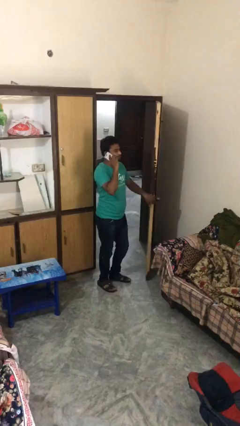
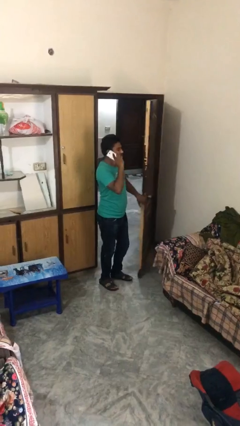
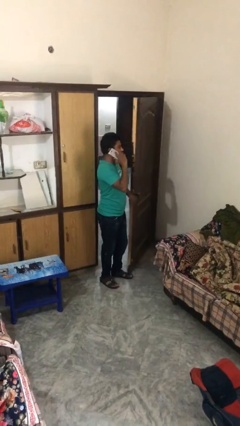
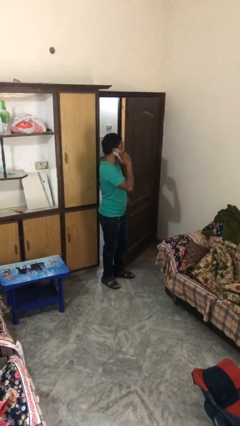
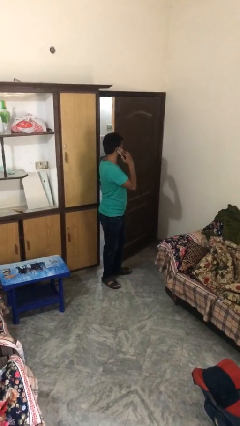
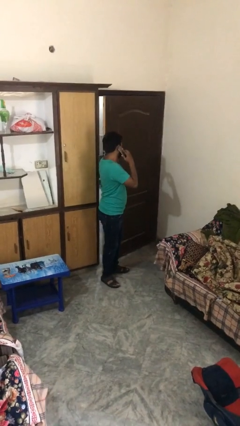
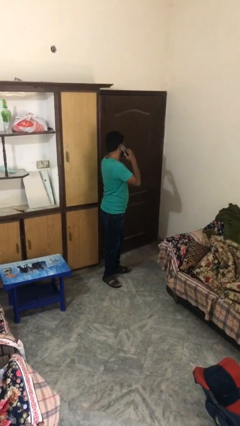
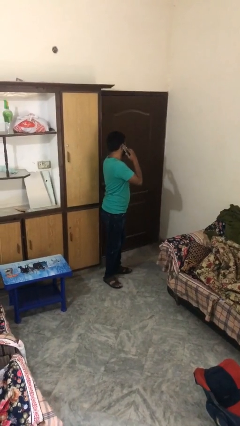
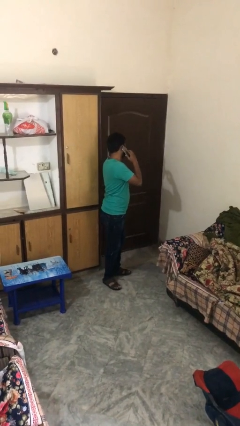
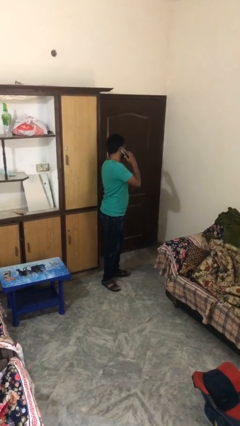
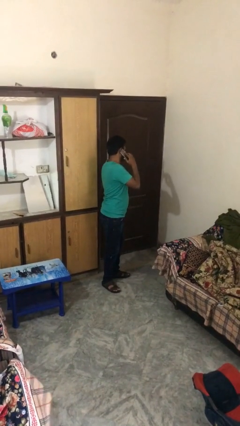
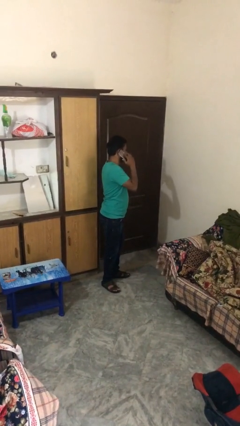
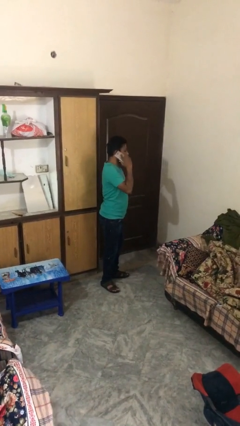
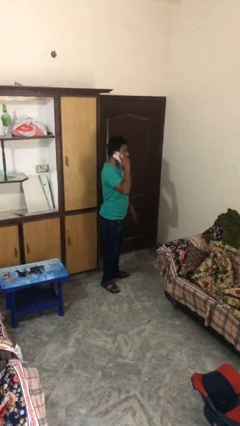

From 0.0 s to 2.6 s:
person closes facility door

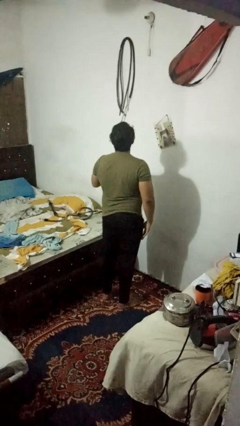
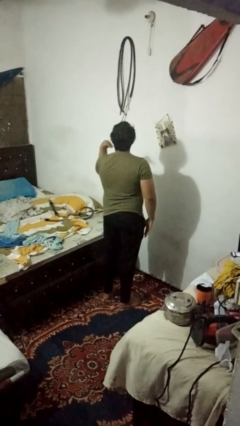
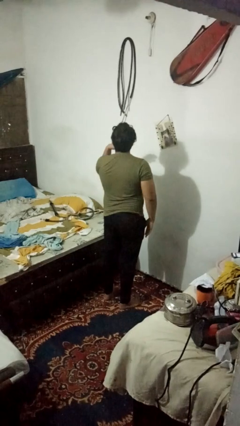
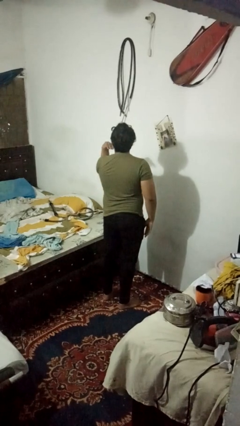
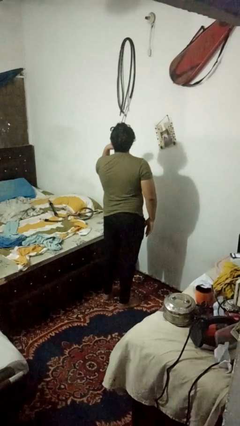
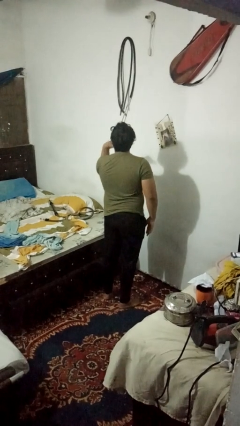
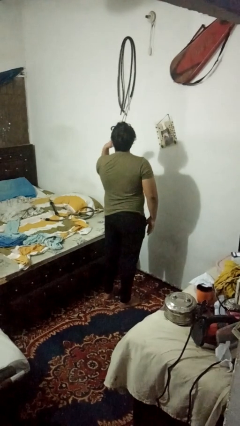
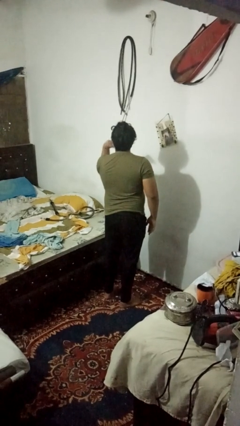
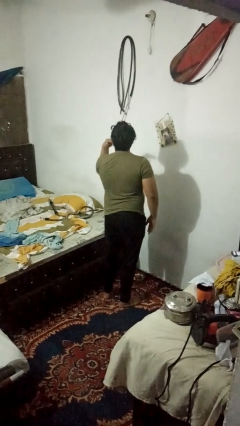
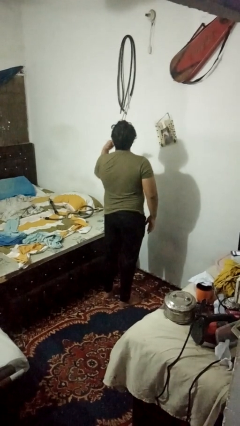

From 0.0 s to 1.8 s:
person gestures cut

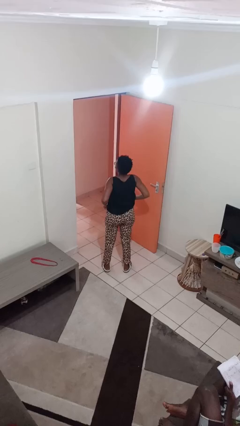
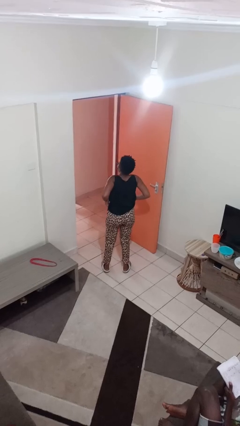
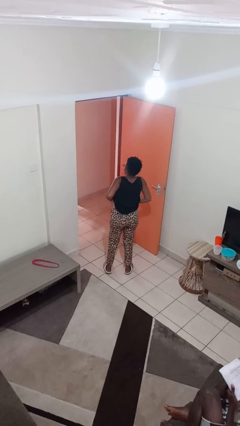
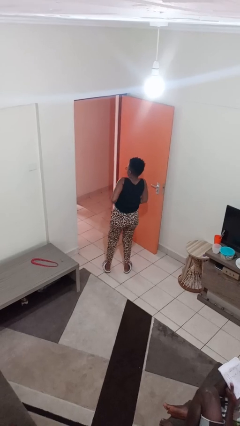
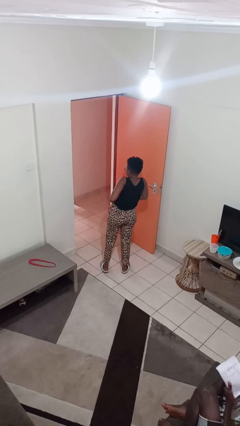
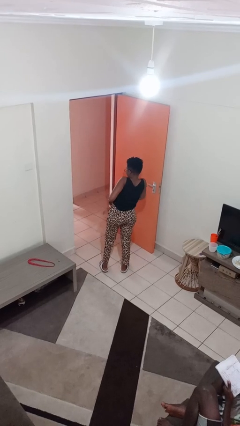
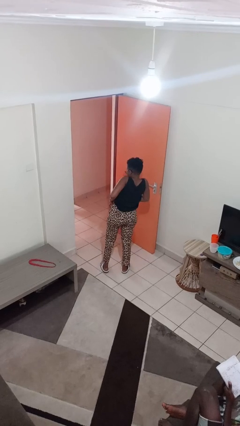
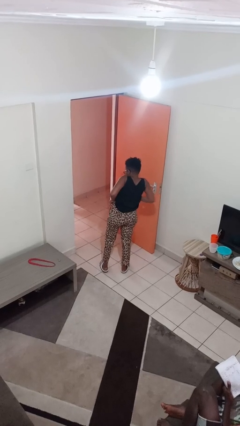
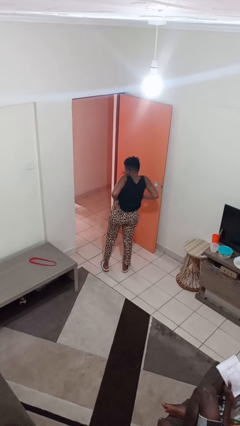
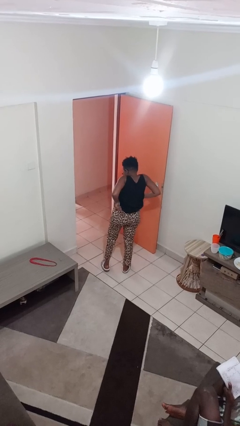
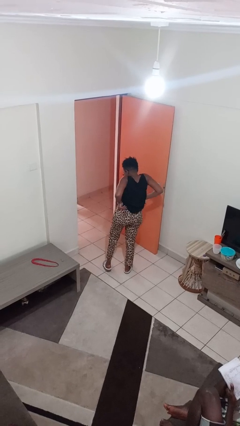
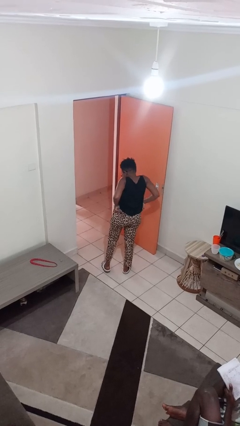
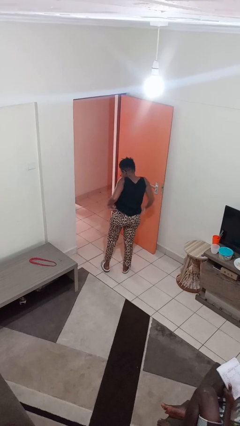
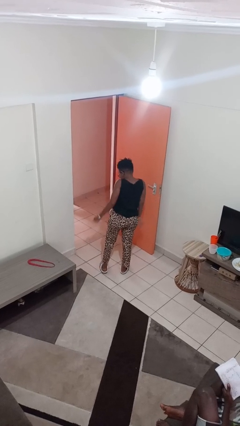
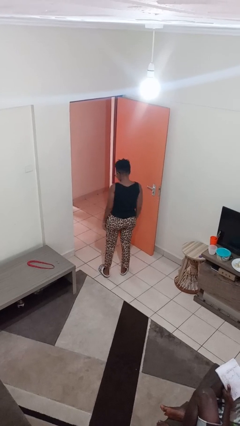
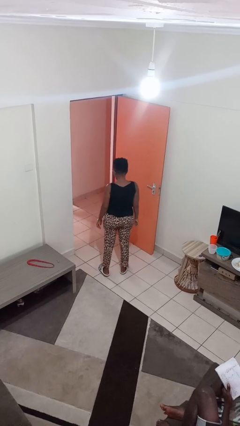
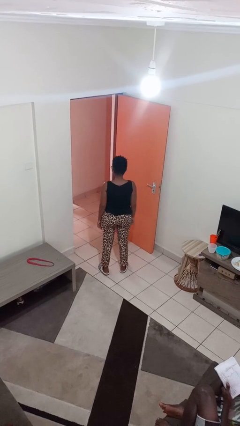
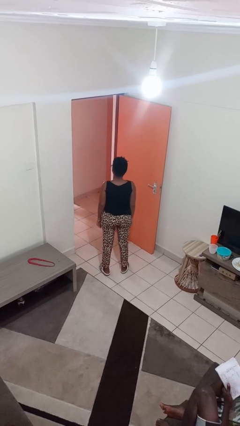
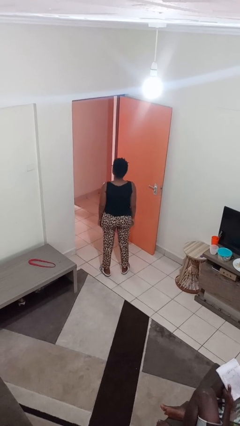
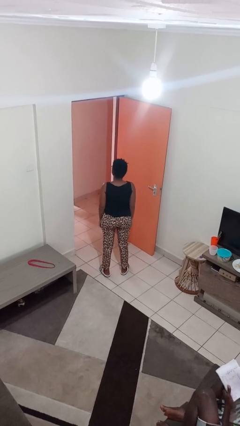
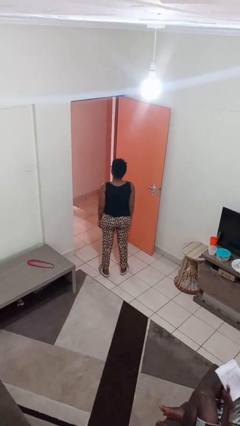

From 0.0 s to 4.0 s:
person hikes up pants

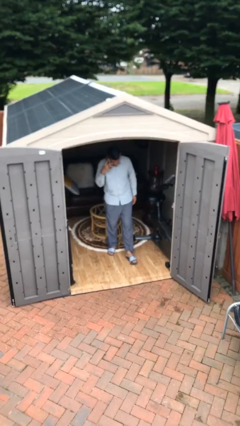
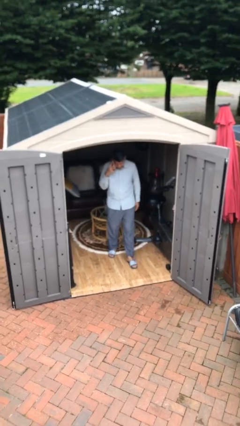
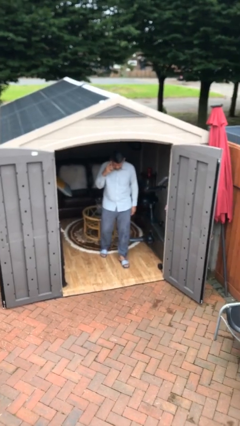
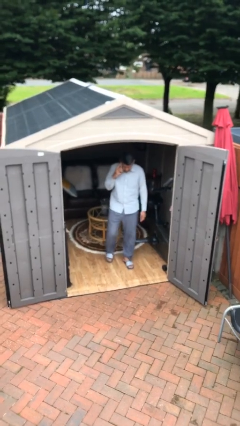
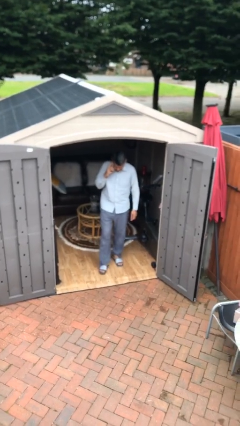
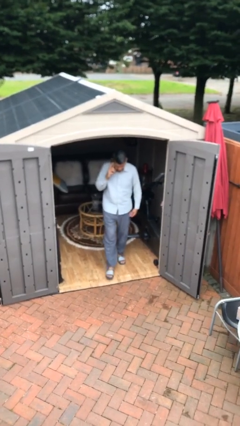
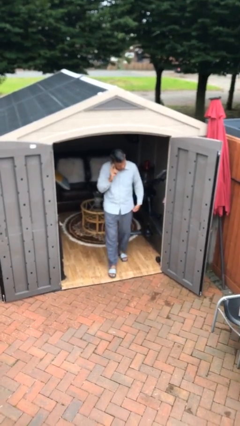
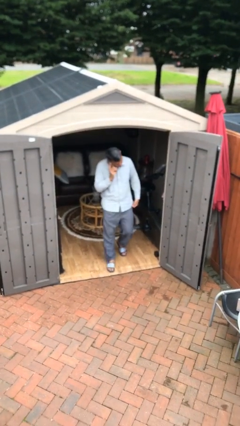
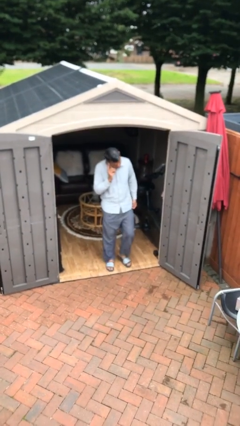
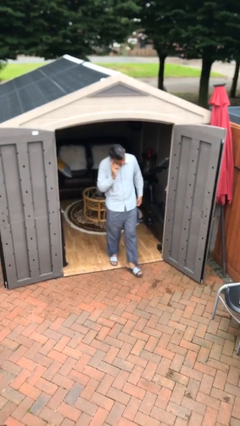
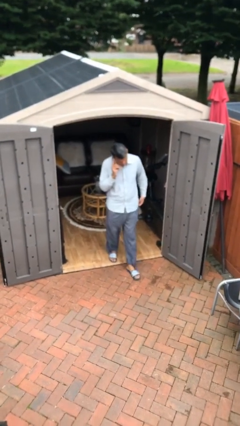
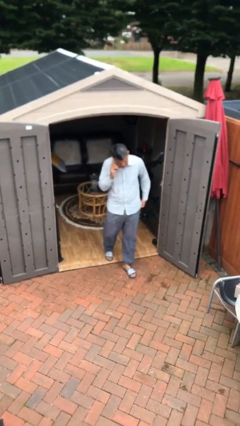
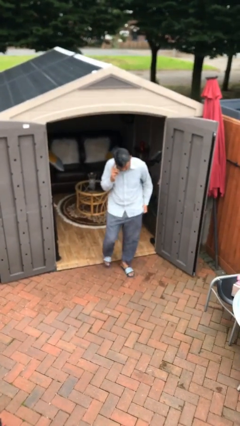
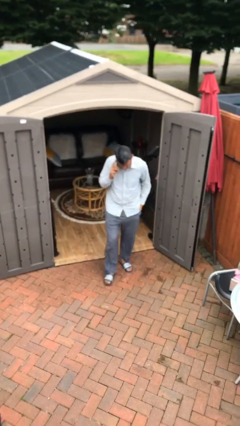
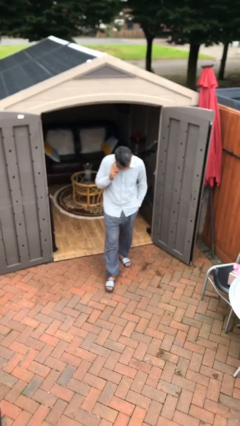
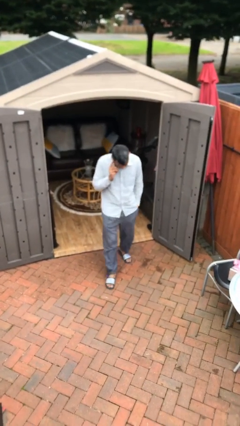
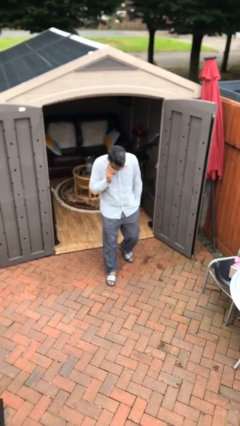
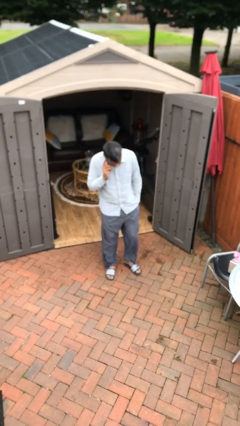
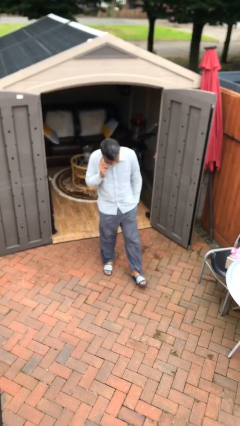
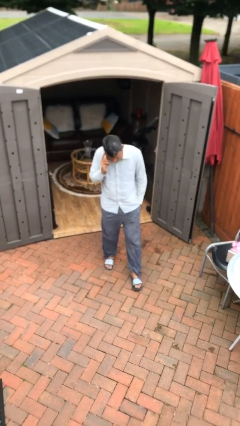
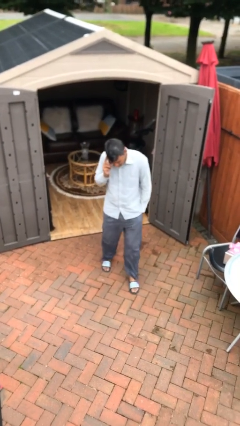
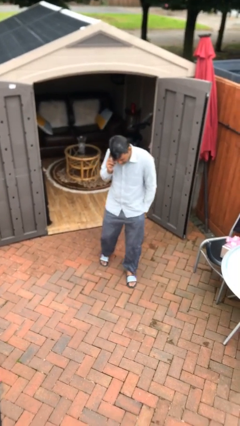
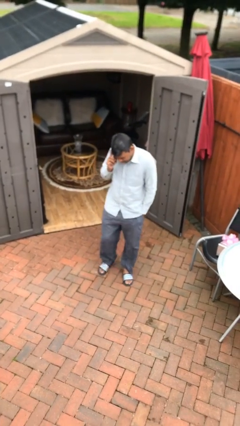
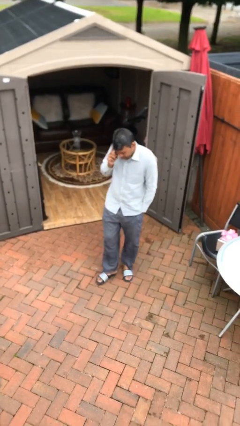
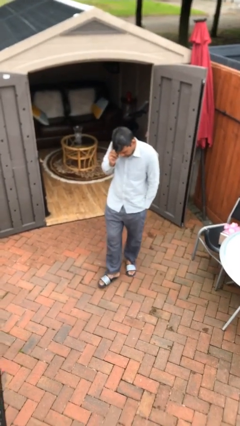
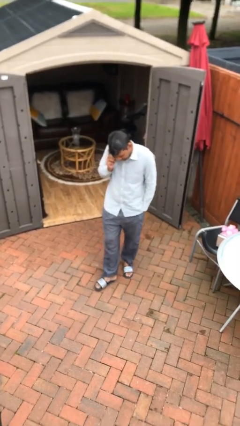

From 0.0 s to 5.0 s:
person enters scene through structure

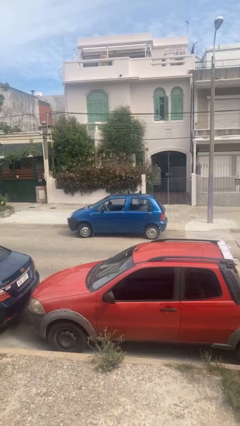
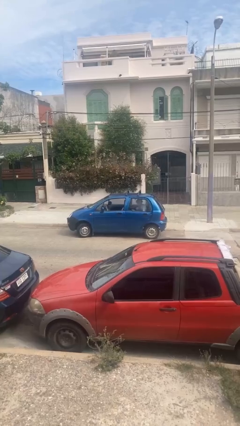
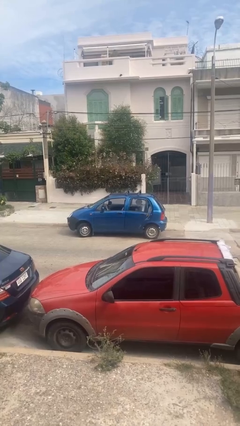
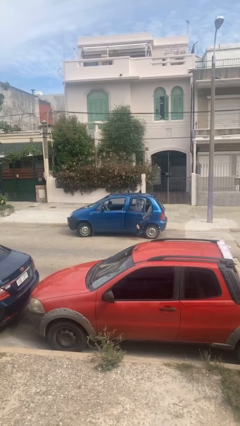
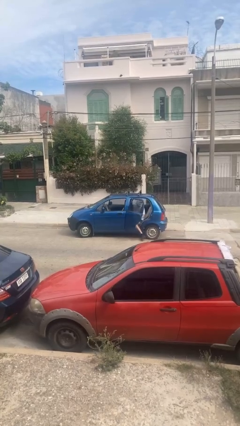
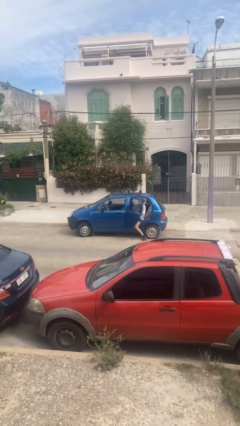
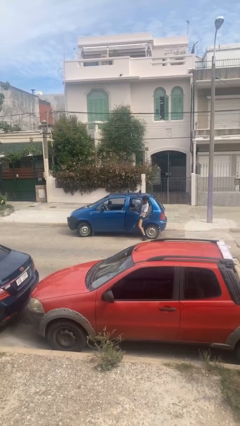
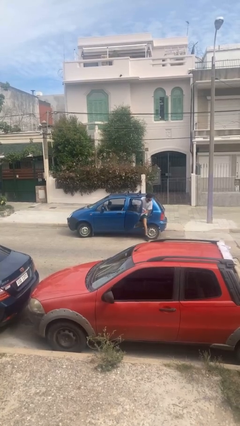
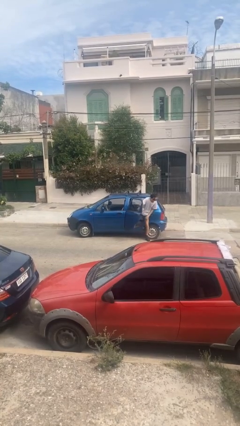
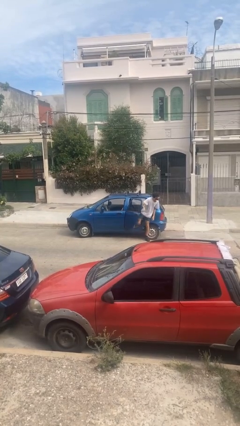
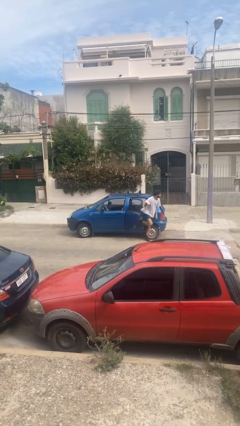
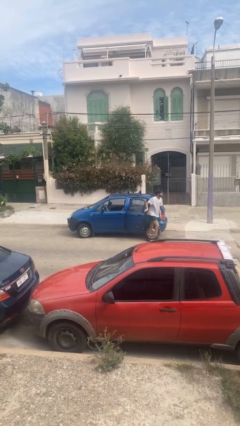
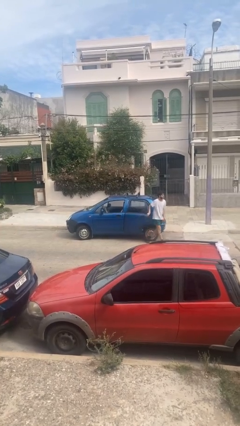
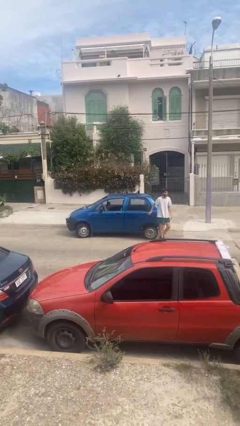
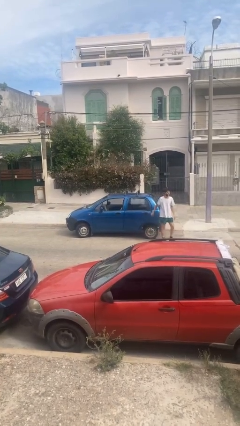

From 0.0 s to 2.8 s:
car drops off person

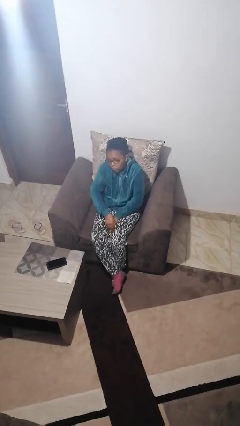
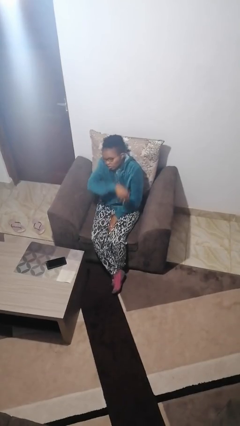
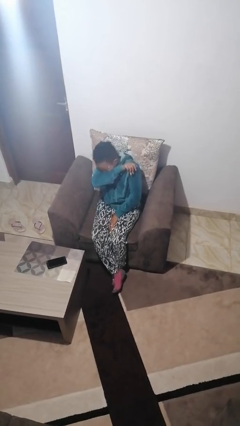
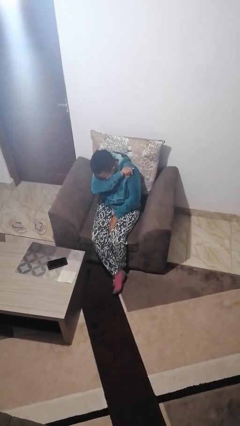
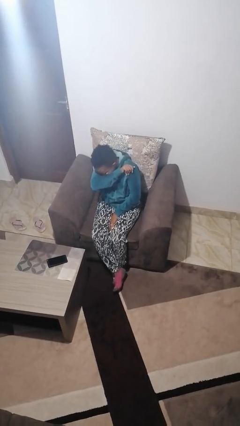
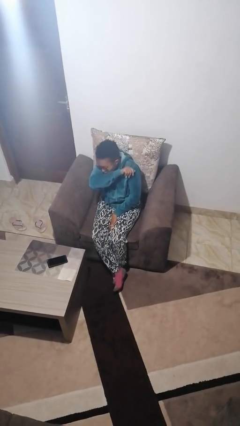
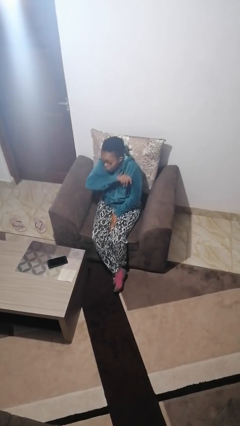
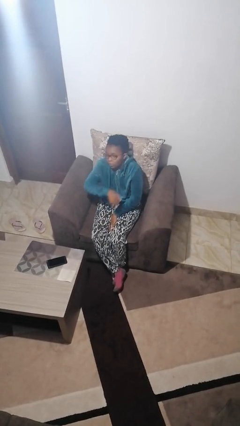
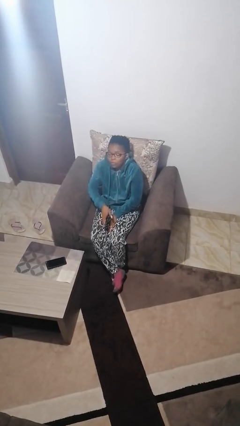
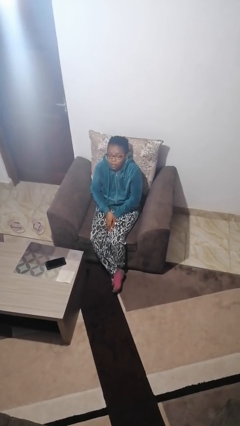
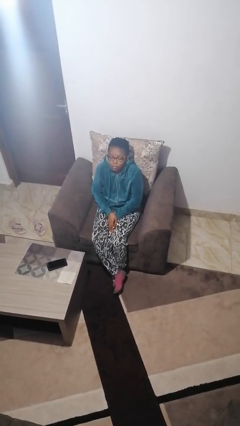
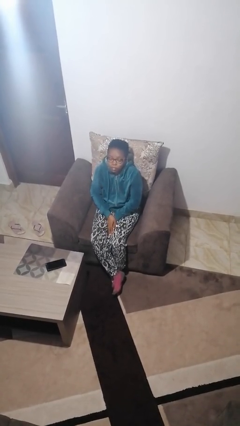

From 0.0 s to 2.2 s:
person sneezes into arm
